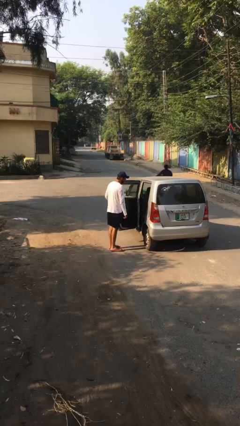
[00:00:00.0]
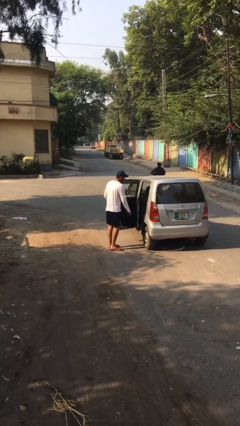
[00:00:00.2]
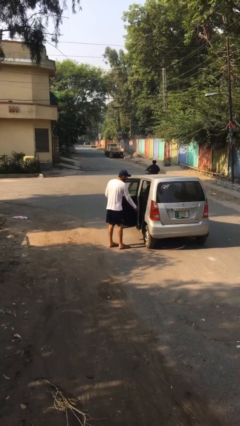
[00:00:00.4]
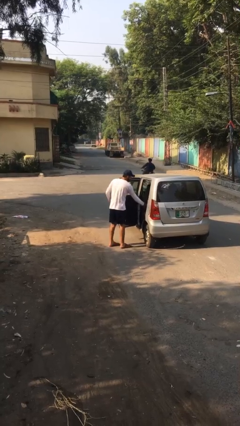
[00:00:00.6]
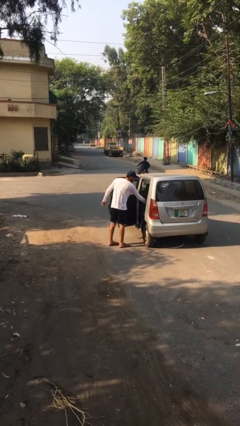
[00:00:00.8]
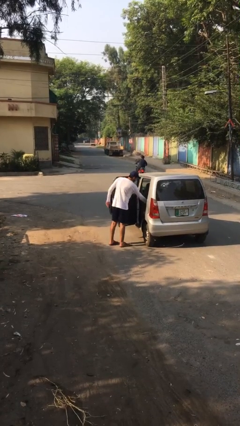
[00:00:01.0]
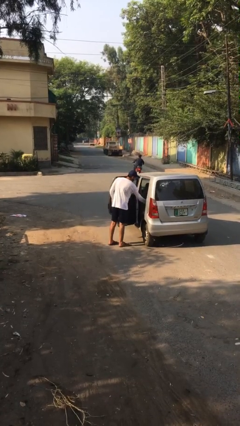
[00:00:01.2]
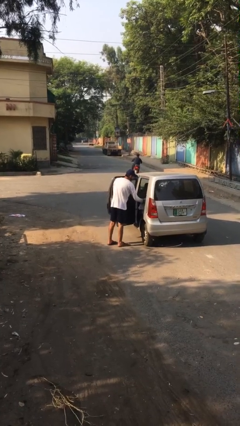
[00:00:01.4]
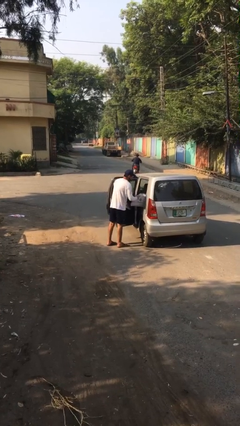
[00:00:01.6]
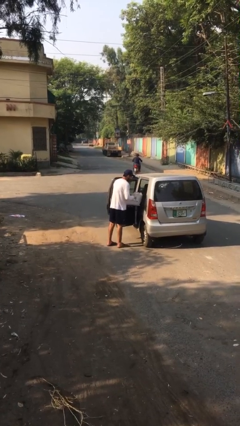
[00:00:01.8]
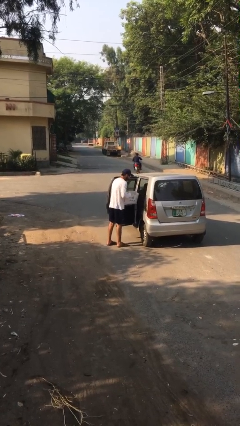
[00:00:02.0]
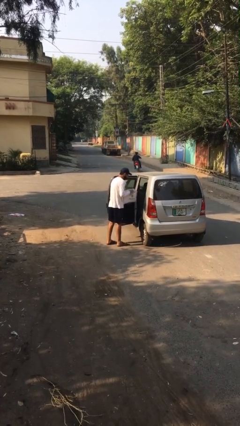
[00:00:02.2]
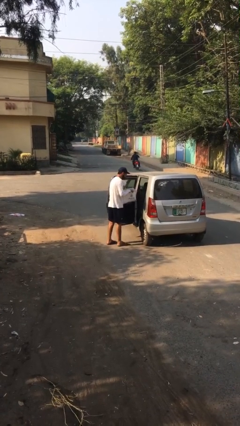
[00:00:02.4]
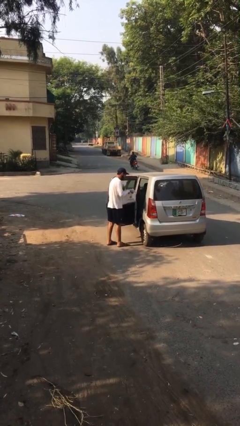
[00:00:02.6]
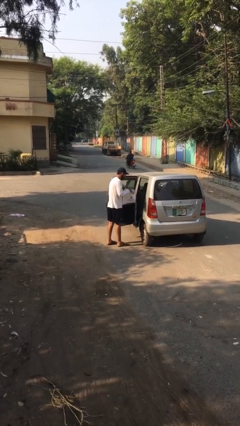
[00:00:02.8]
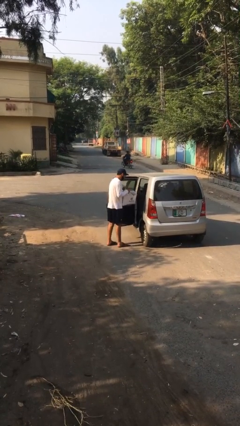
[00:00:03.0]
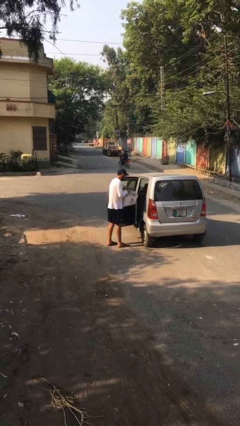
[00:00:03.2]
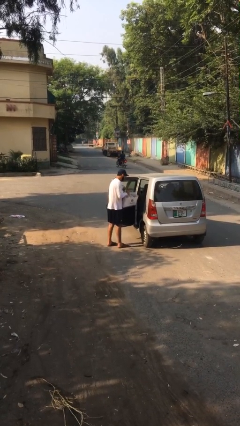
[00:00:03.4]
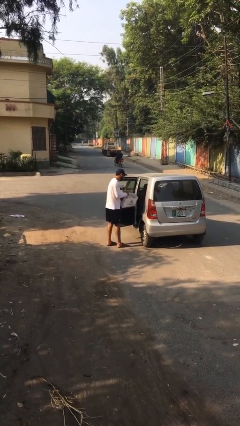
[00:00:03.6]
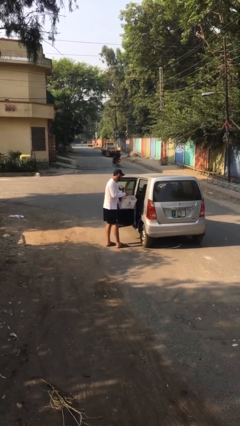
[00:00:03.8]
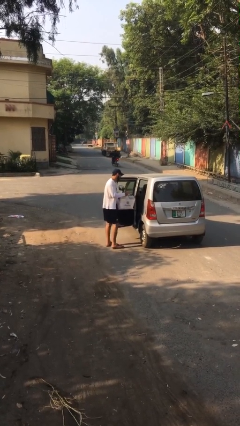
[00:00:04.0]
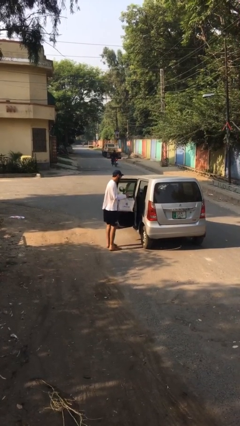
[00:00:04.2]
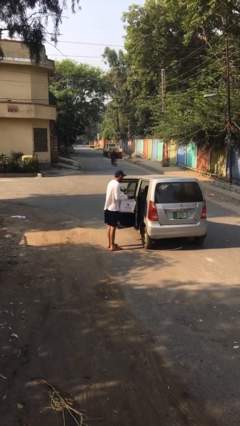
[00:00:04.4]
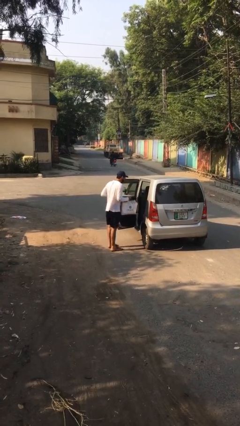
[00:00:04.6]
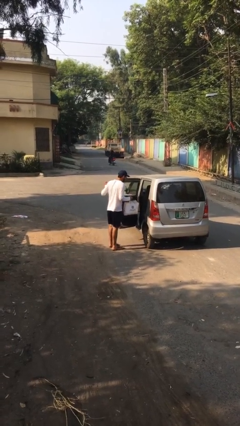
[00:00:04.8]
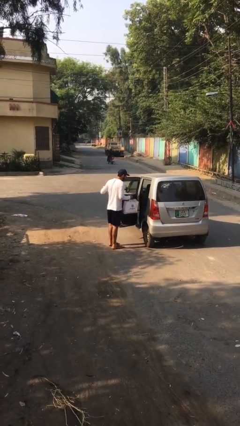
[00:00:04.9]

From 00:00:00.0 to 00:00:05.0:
person unloads car

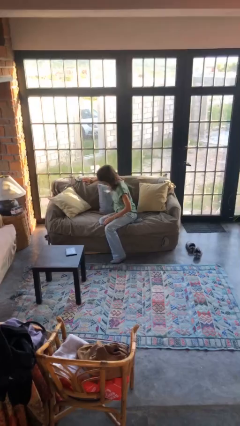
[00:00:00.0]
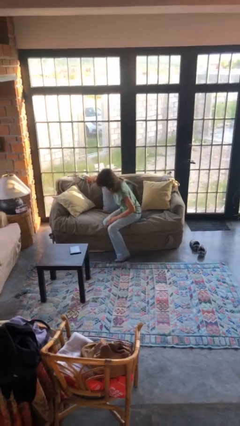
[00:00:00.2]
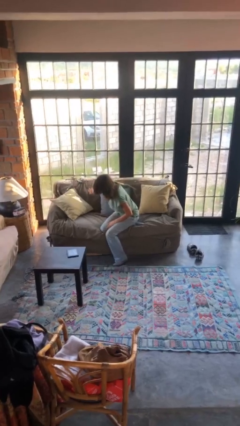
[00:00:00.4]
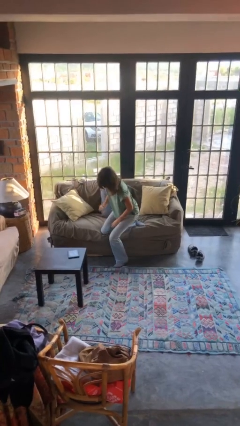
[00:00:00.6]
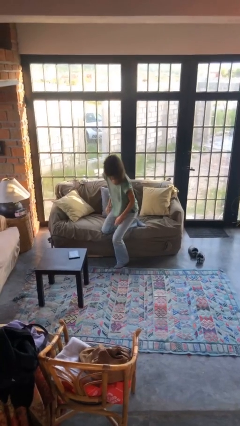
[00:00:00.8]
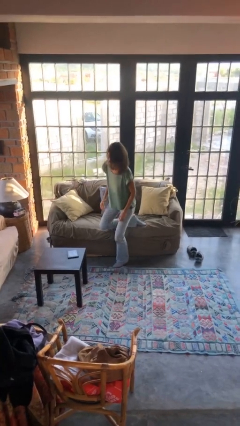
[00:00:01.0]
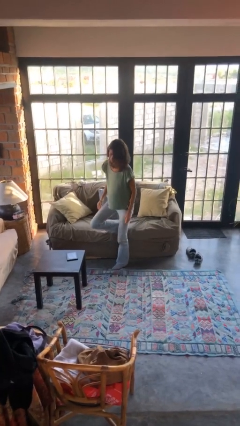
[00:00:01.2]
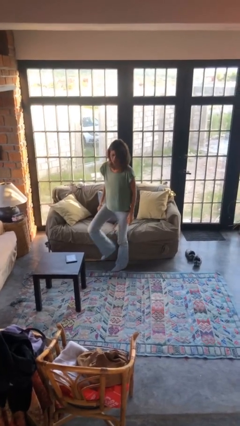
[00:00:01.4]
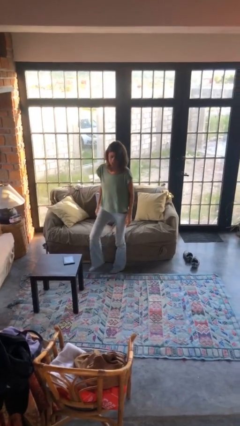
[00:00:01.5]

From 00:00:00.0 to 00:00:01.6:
person stands up

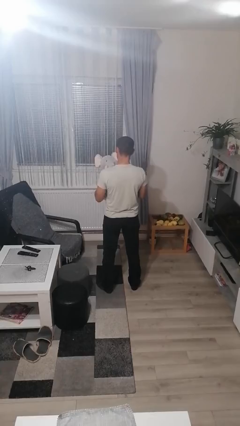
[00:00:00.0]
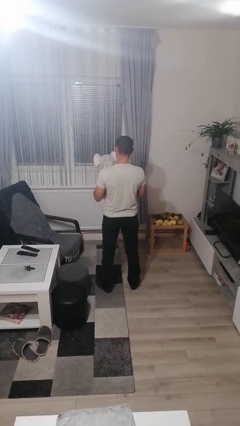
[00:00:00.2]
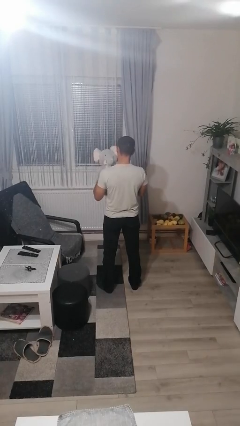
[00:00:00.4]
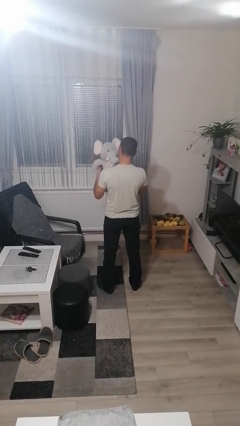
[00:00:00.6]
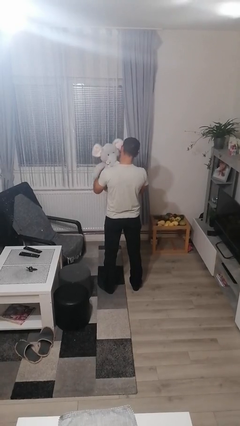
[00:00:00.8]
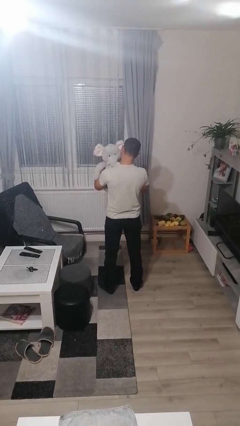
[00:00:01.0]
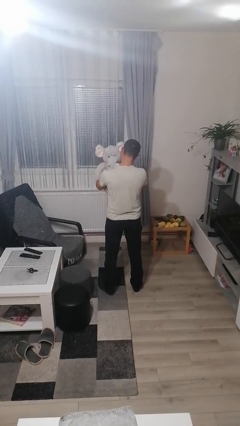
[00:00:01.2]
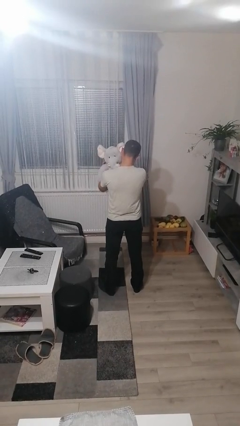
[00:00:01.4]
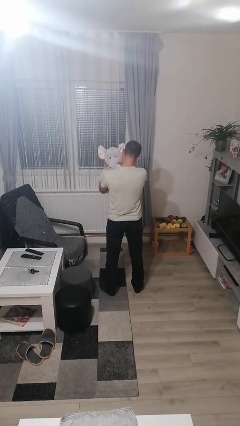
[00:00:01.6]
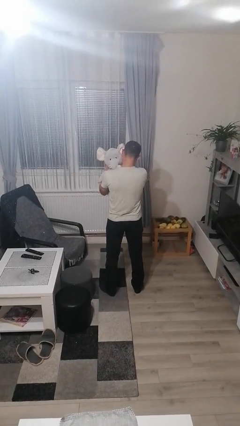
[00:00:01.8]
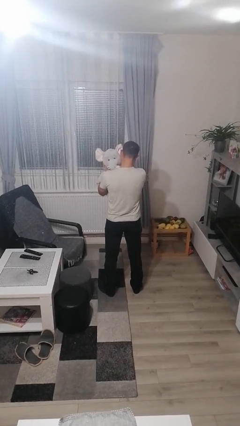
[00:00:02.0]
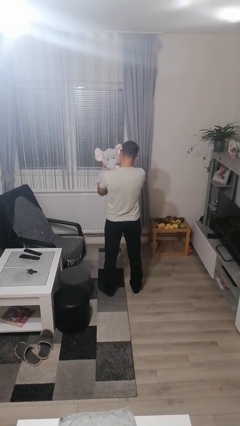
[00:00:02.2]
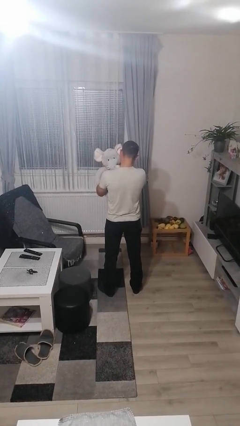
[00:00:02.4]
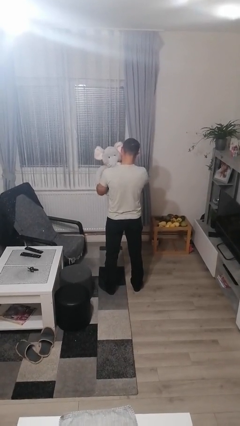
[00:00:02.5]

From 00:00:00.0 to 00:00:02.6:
person hugs stuffed animal

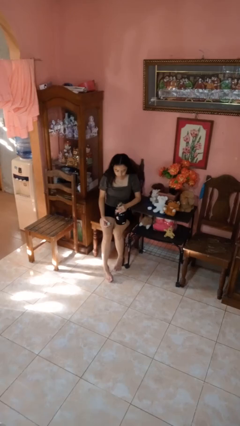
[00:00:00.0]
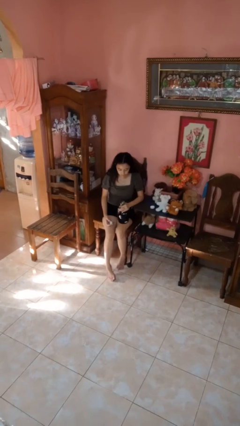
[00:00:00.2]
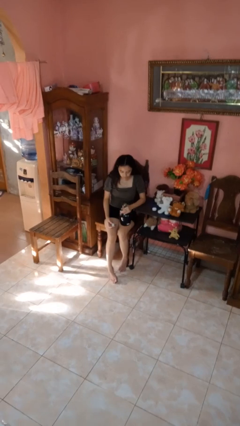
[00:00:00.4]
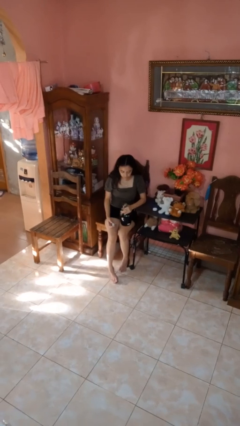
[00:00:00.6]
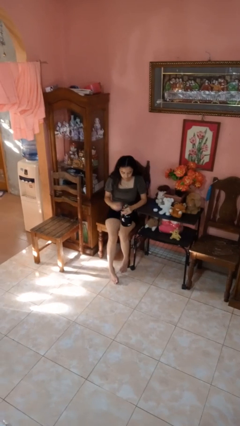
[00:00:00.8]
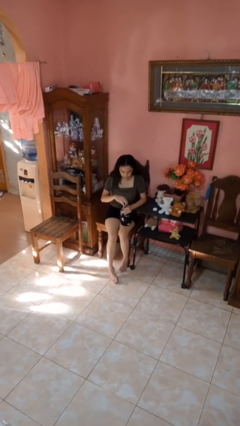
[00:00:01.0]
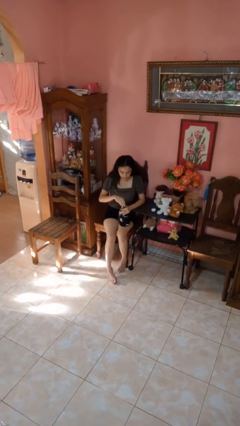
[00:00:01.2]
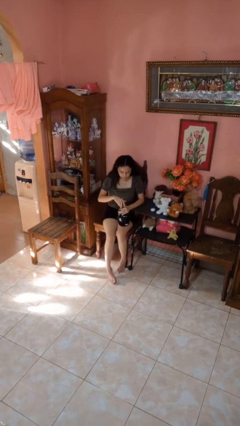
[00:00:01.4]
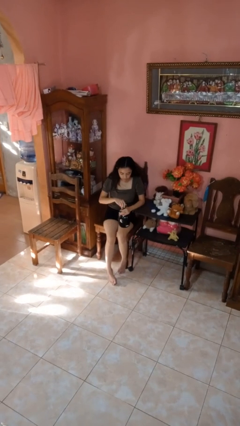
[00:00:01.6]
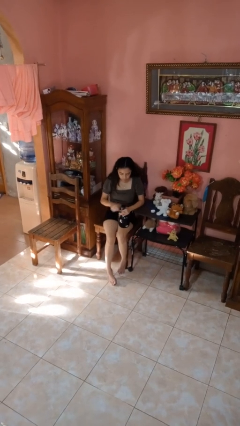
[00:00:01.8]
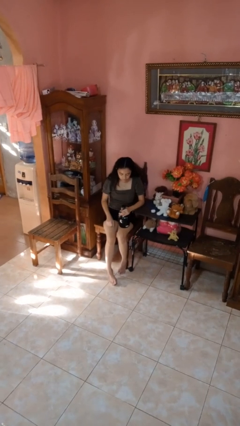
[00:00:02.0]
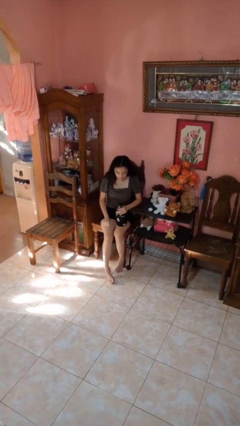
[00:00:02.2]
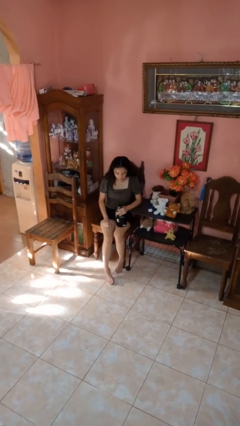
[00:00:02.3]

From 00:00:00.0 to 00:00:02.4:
person screws lid to bottle

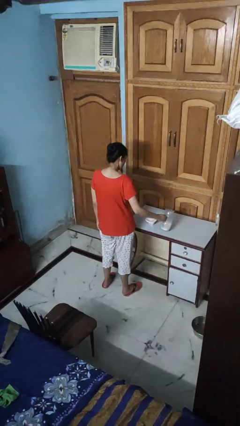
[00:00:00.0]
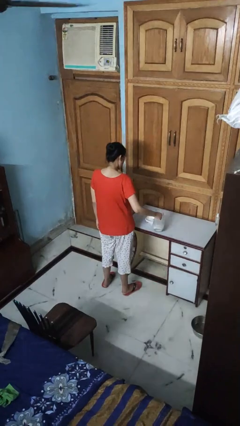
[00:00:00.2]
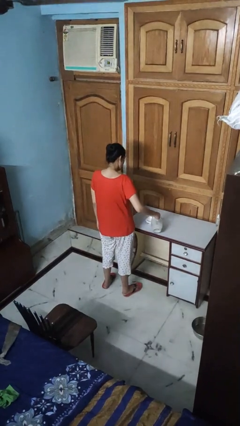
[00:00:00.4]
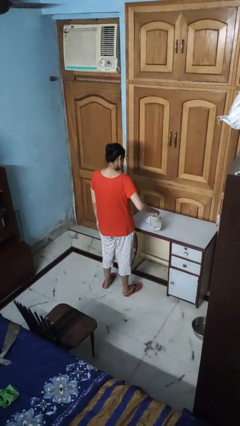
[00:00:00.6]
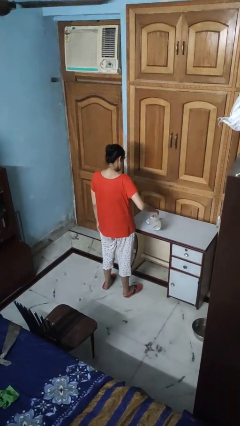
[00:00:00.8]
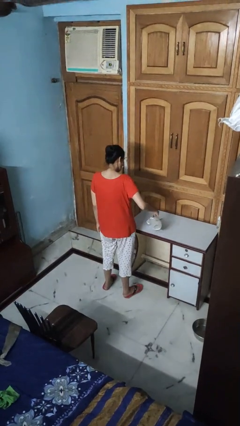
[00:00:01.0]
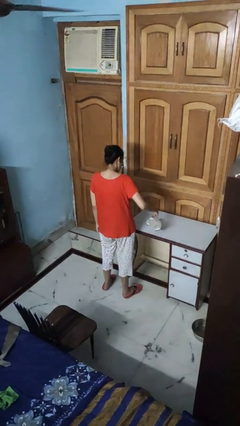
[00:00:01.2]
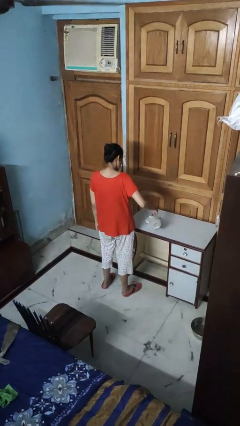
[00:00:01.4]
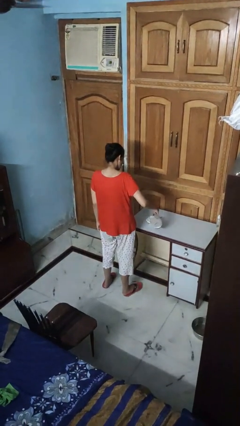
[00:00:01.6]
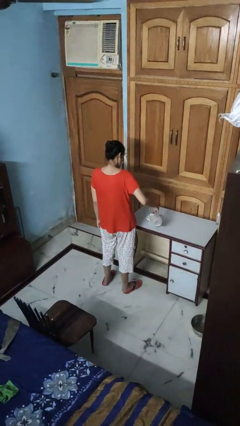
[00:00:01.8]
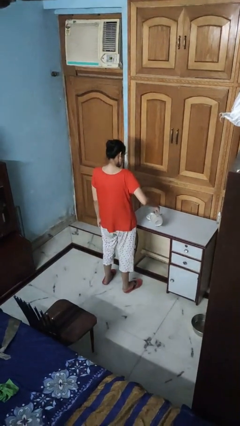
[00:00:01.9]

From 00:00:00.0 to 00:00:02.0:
person pours into bowl

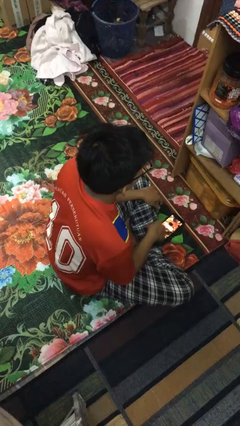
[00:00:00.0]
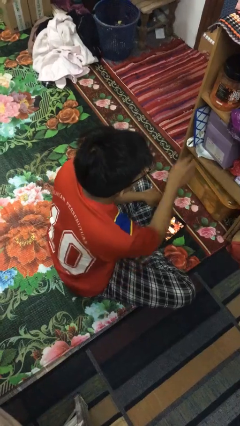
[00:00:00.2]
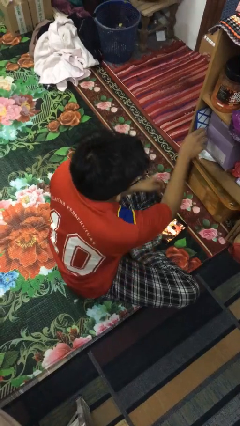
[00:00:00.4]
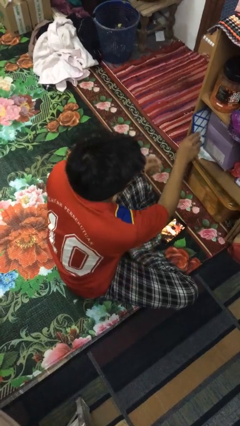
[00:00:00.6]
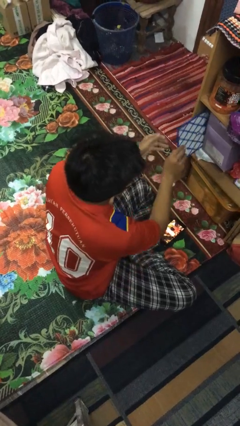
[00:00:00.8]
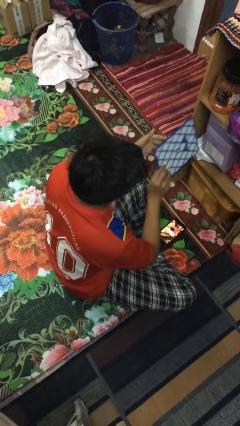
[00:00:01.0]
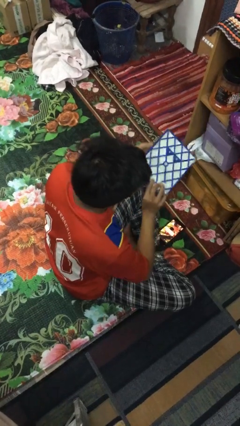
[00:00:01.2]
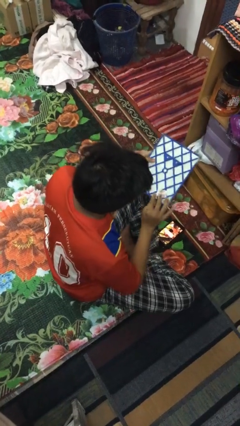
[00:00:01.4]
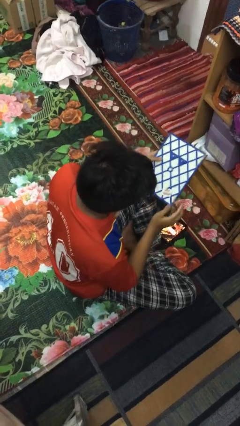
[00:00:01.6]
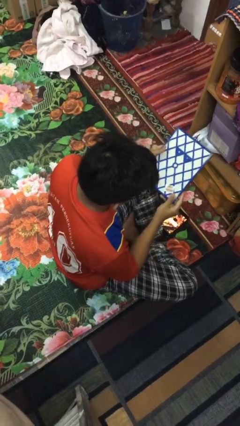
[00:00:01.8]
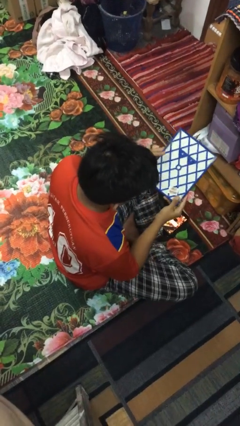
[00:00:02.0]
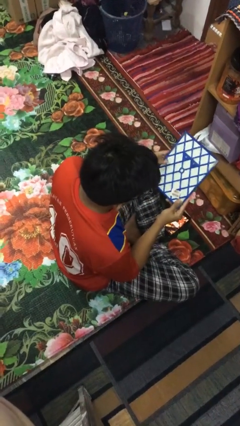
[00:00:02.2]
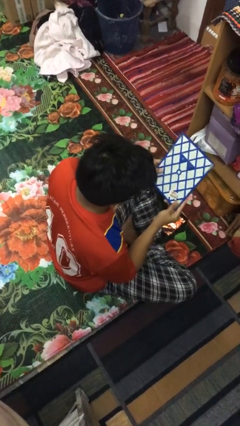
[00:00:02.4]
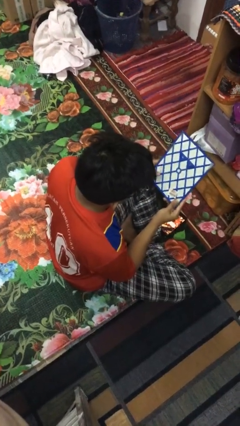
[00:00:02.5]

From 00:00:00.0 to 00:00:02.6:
person picks up object from cabinet

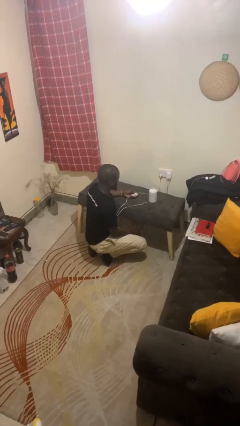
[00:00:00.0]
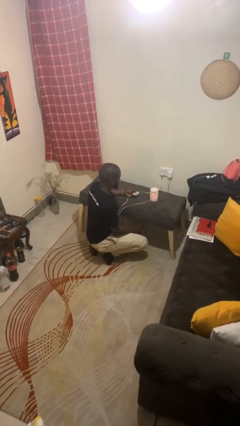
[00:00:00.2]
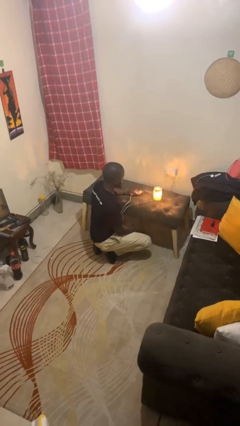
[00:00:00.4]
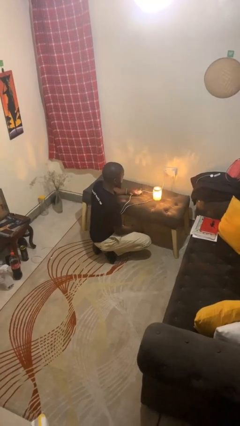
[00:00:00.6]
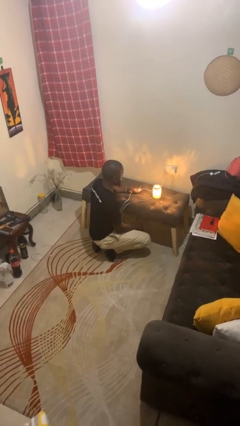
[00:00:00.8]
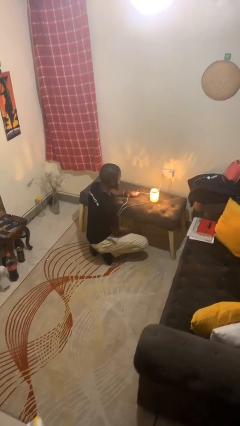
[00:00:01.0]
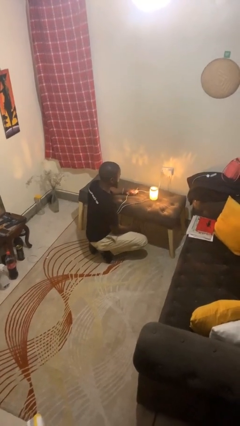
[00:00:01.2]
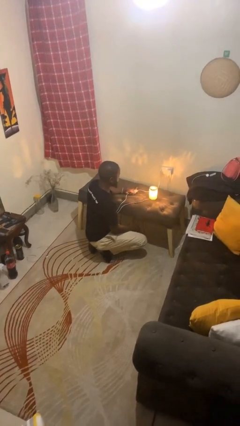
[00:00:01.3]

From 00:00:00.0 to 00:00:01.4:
person turns on lamp
